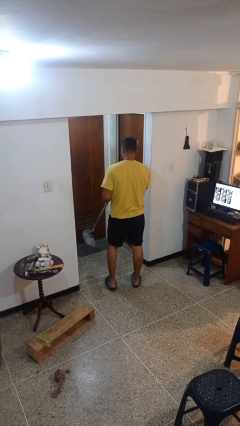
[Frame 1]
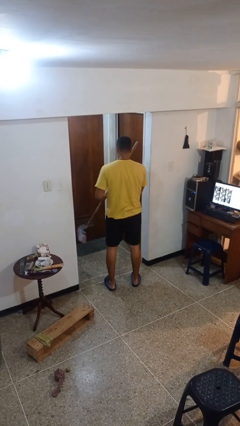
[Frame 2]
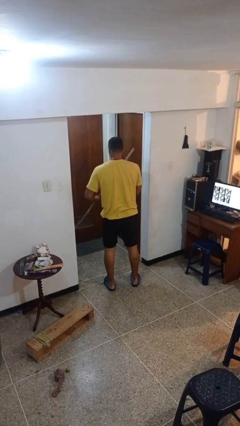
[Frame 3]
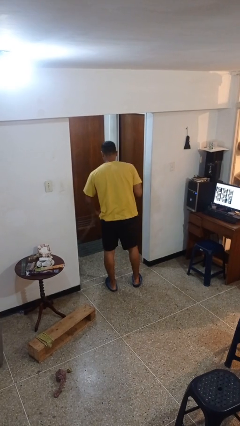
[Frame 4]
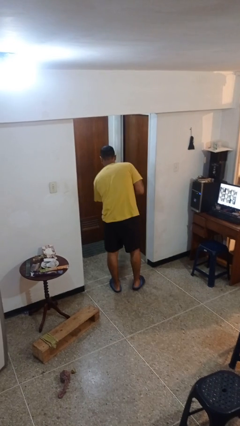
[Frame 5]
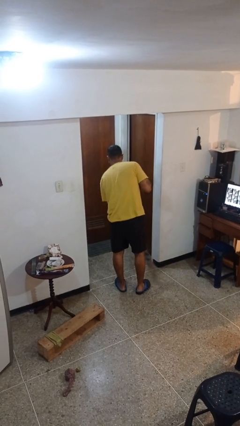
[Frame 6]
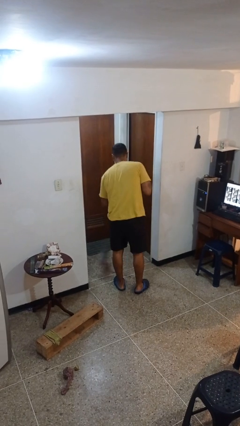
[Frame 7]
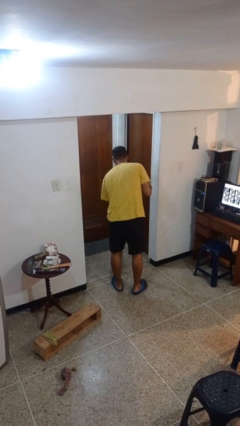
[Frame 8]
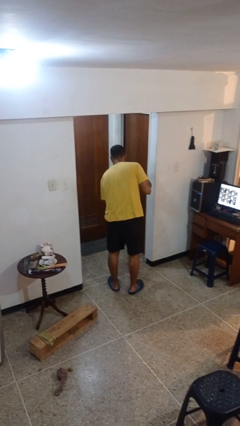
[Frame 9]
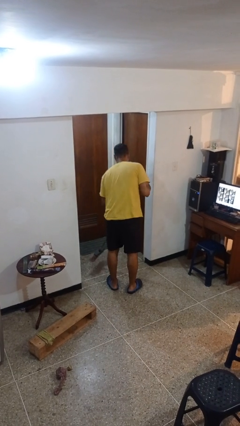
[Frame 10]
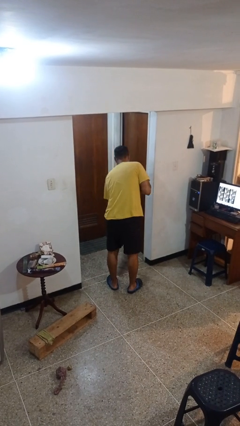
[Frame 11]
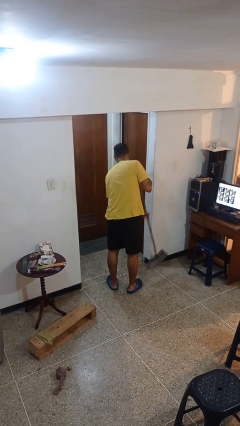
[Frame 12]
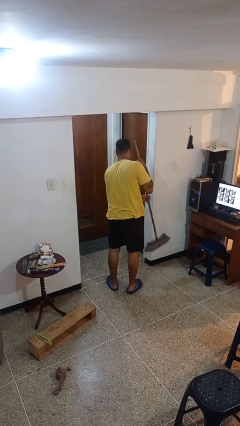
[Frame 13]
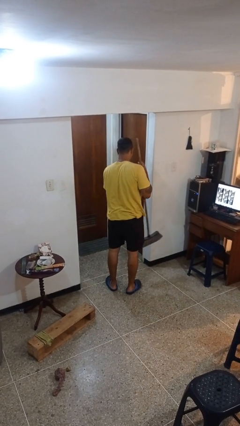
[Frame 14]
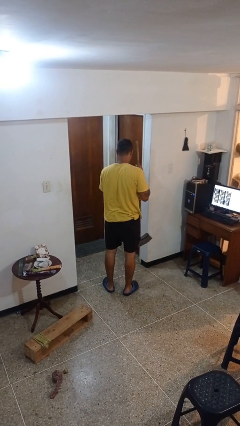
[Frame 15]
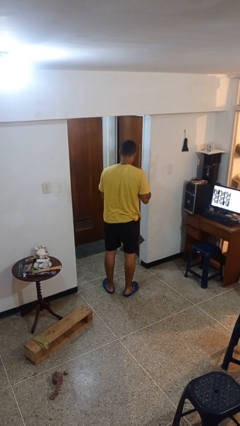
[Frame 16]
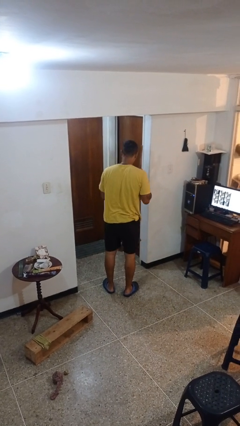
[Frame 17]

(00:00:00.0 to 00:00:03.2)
person sweeps floor

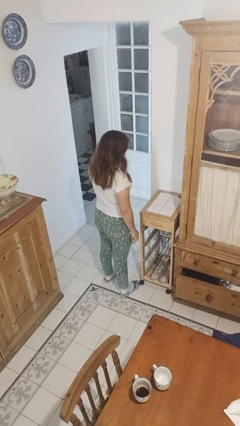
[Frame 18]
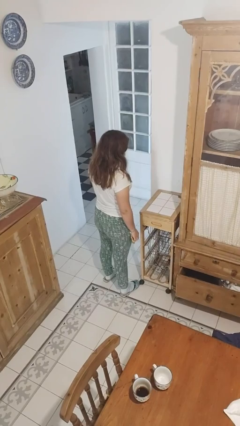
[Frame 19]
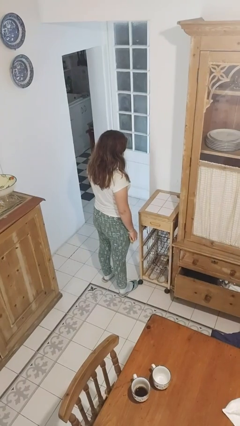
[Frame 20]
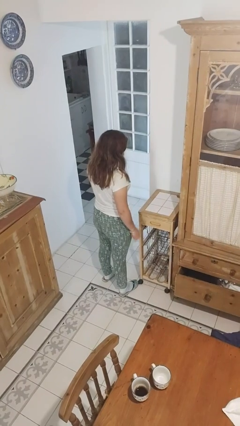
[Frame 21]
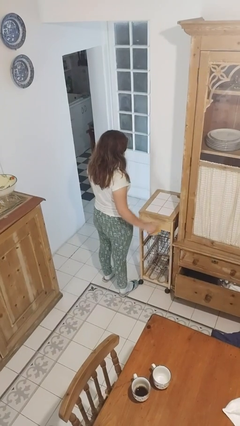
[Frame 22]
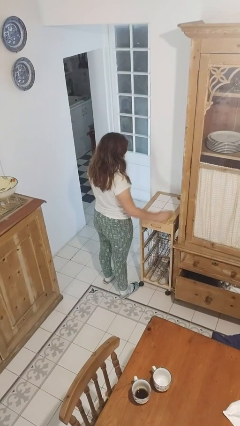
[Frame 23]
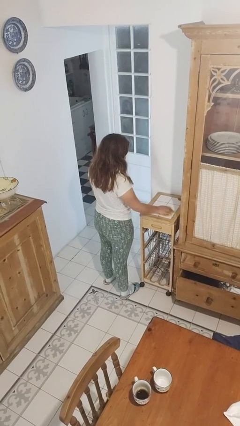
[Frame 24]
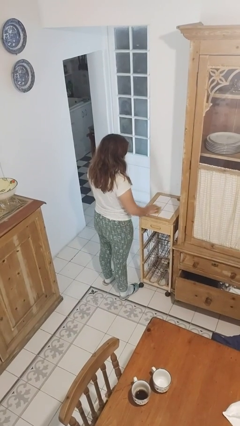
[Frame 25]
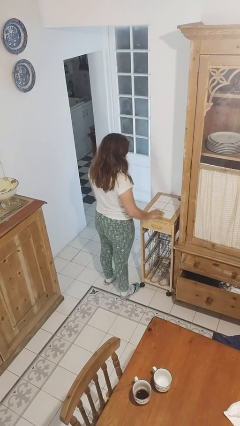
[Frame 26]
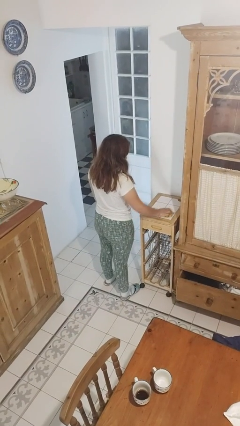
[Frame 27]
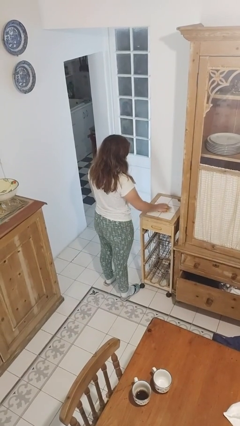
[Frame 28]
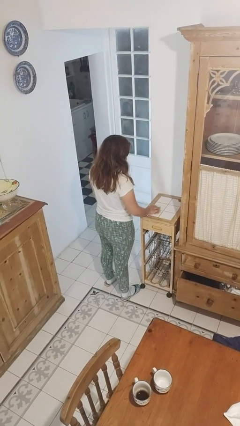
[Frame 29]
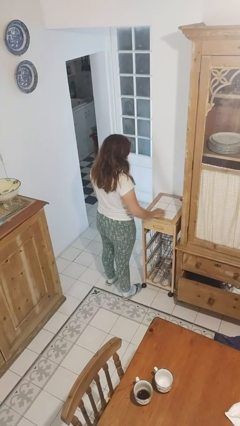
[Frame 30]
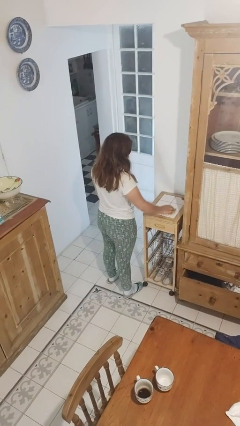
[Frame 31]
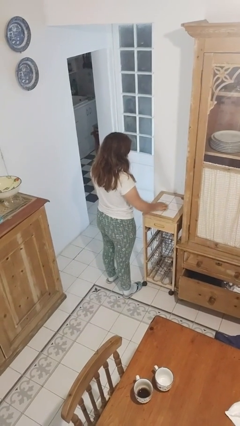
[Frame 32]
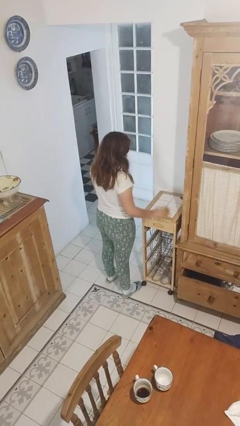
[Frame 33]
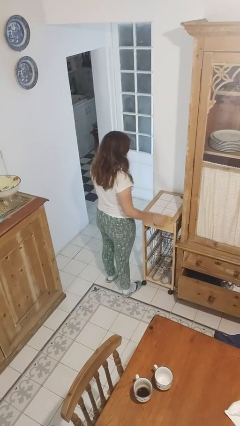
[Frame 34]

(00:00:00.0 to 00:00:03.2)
person cleans table with rag

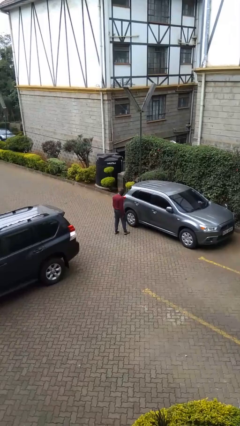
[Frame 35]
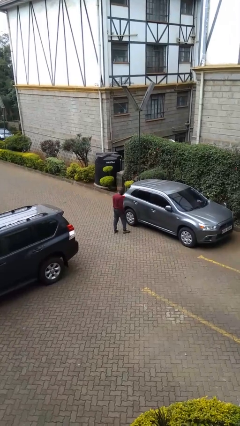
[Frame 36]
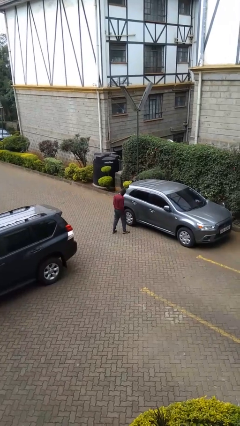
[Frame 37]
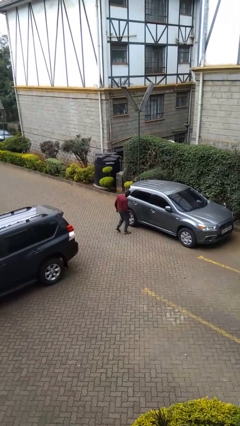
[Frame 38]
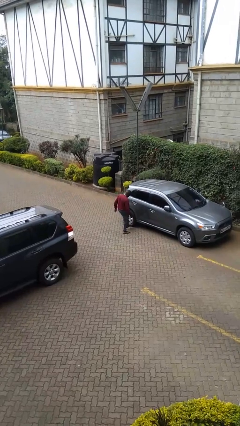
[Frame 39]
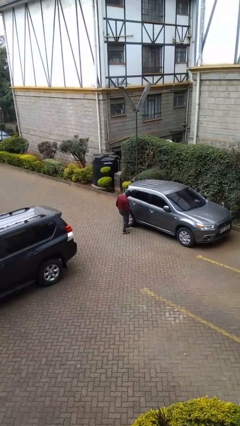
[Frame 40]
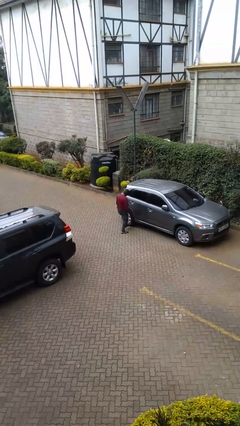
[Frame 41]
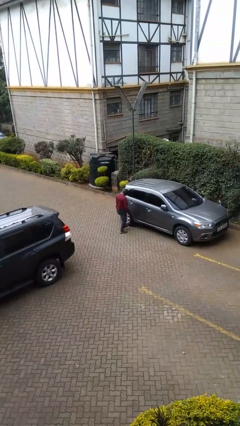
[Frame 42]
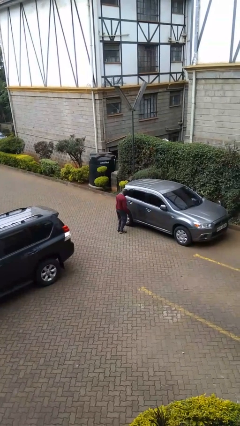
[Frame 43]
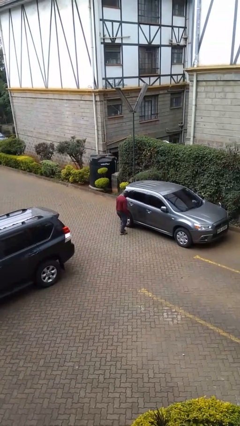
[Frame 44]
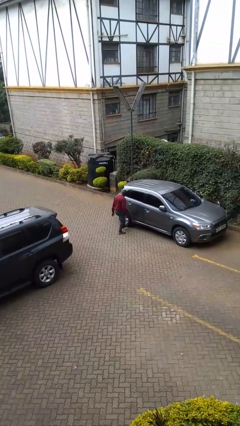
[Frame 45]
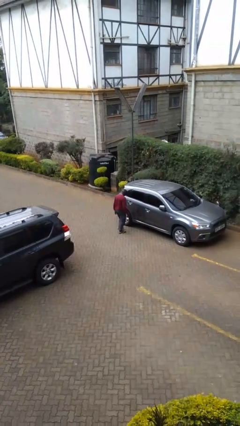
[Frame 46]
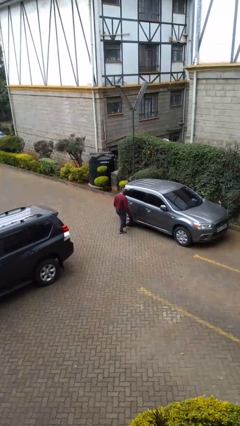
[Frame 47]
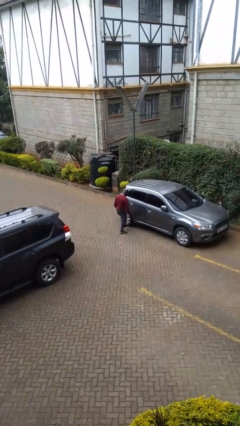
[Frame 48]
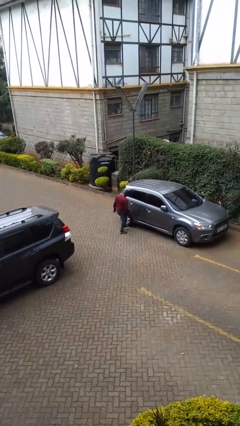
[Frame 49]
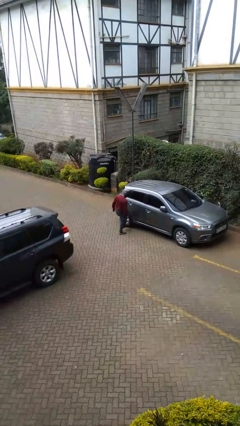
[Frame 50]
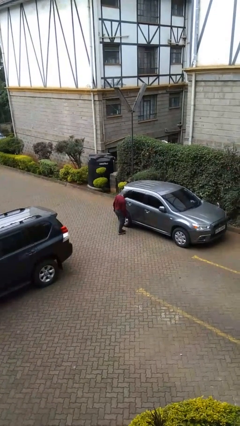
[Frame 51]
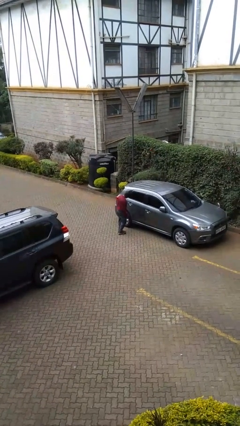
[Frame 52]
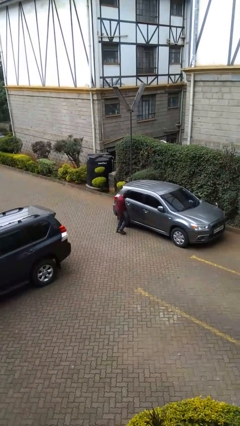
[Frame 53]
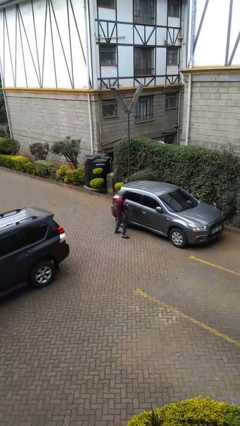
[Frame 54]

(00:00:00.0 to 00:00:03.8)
person kicks car tires

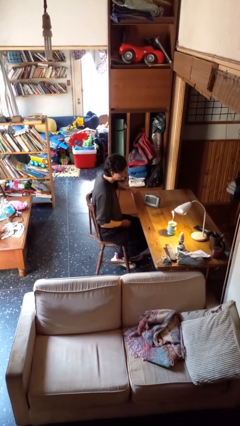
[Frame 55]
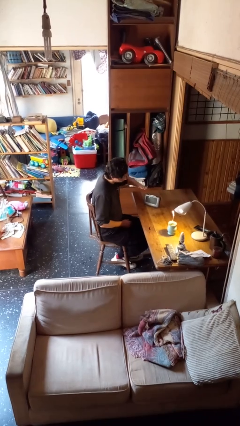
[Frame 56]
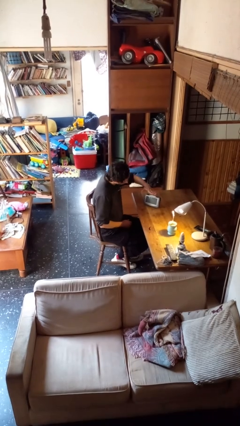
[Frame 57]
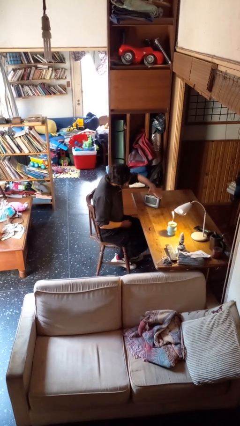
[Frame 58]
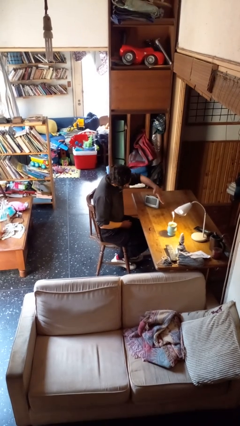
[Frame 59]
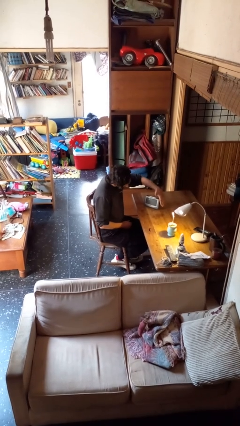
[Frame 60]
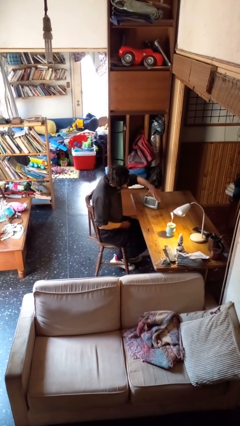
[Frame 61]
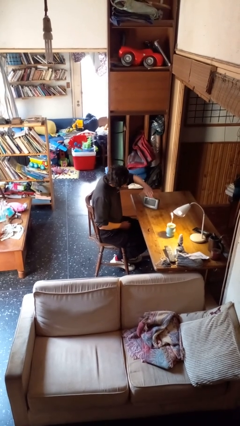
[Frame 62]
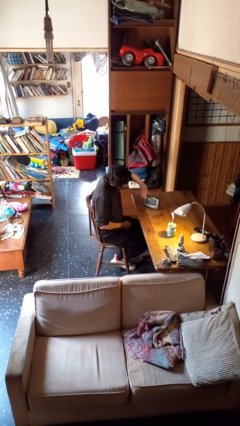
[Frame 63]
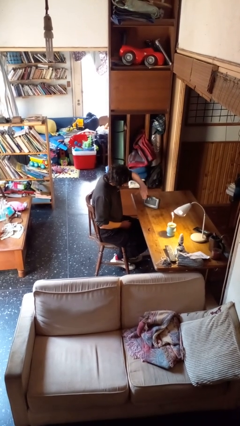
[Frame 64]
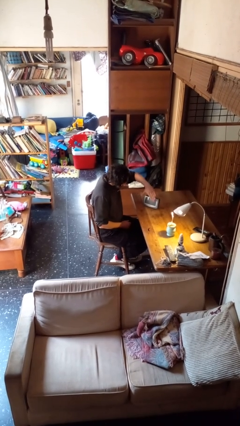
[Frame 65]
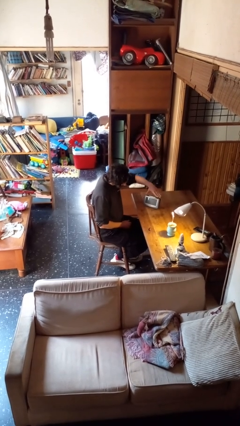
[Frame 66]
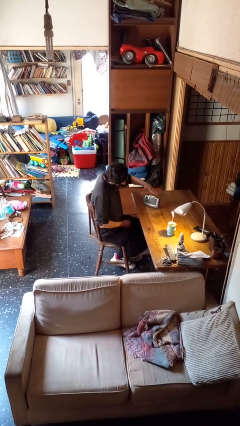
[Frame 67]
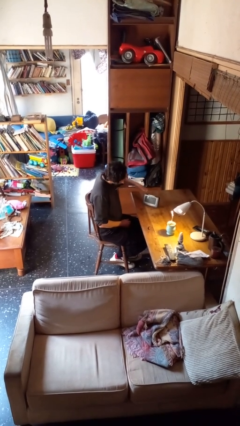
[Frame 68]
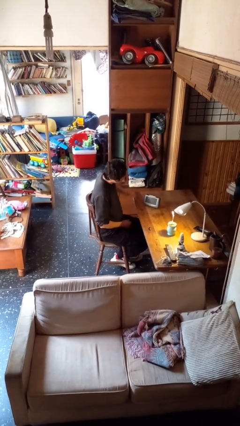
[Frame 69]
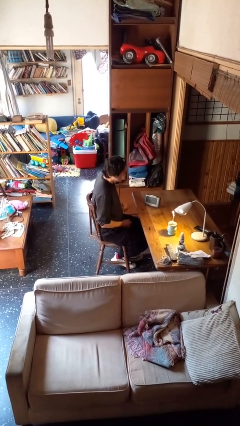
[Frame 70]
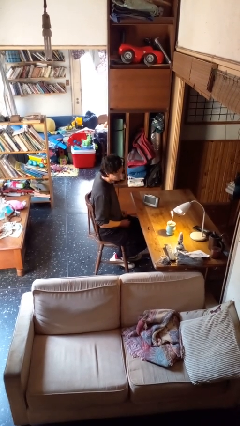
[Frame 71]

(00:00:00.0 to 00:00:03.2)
person waves hand over object

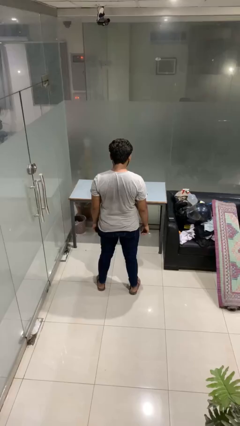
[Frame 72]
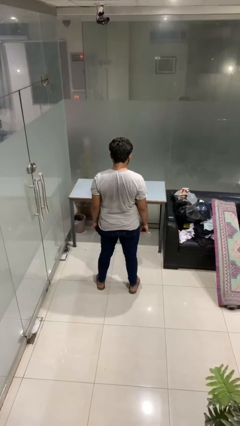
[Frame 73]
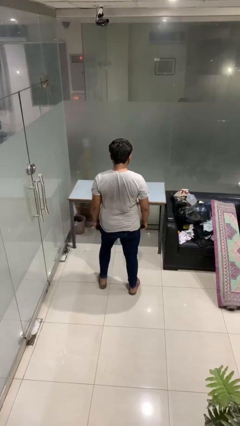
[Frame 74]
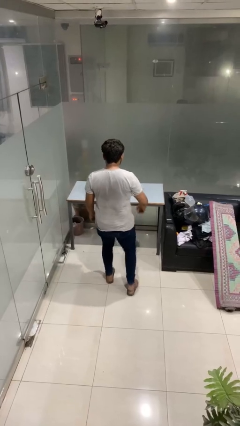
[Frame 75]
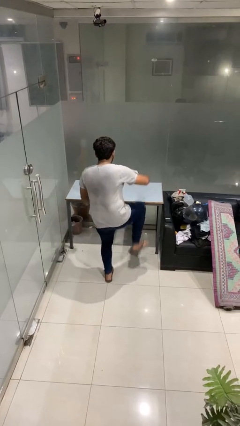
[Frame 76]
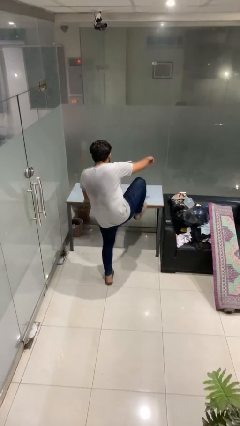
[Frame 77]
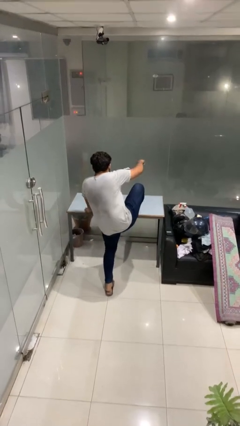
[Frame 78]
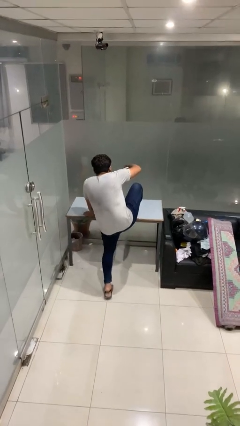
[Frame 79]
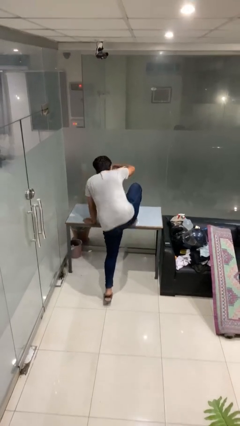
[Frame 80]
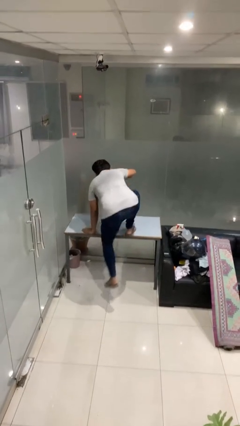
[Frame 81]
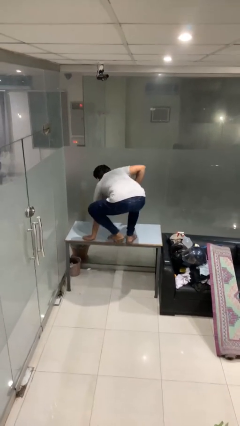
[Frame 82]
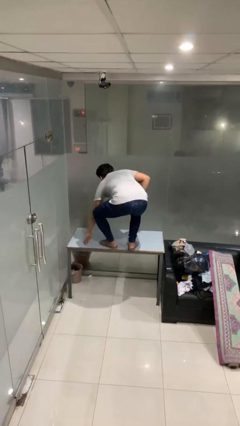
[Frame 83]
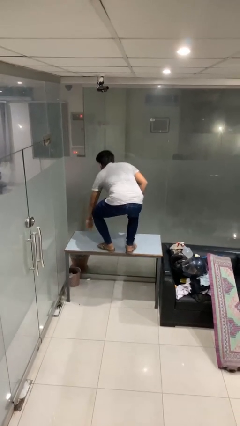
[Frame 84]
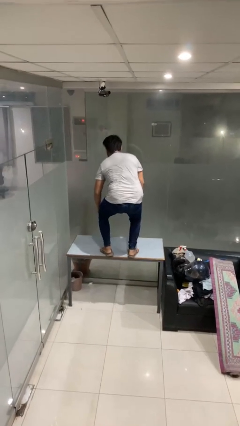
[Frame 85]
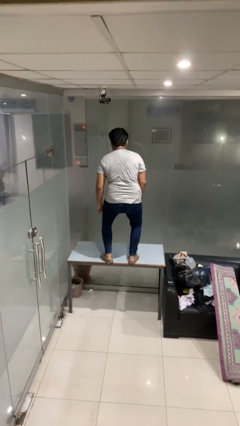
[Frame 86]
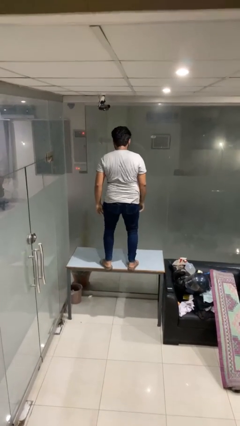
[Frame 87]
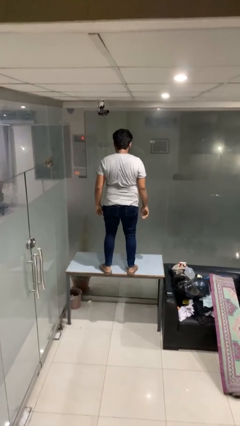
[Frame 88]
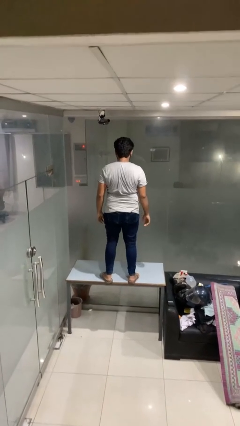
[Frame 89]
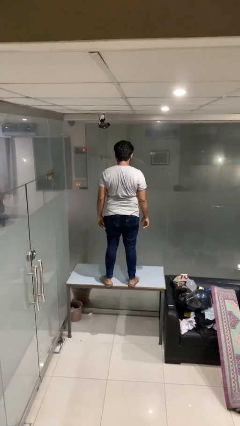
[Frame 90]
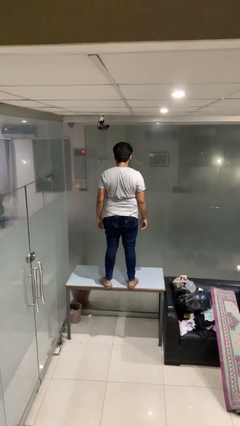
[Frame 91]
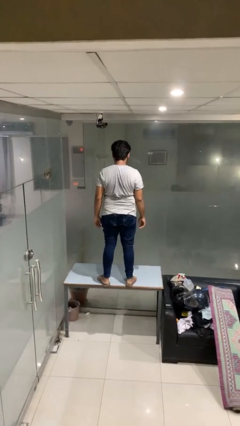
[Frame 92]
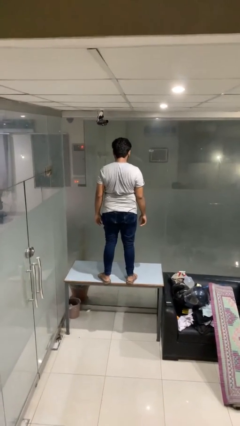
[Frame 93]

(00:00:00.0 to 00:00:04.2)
person climbs on table

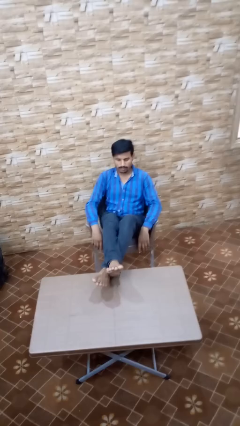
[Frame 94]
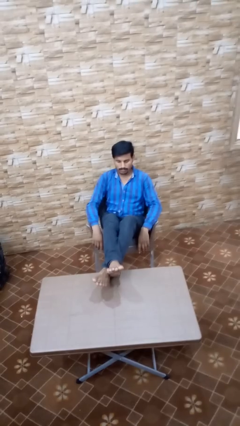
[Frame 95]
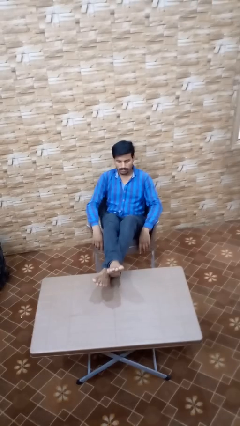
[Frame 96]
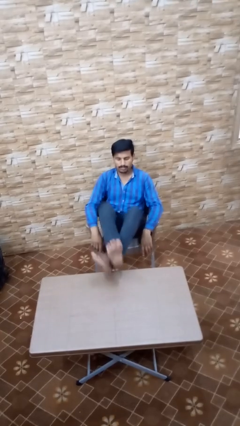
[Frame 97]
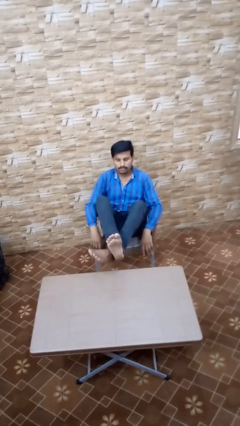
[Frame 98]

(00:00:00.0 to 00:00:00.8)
person puts feet up
